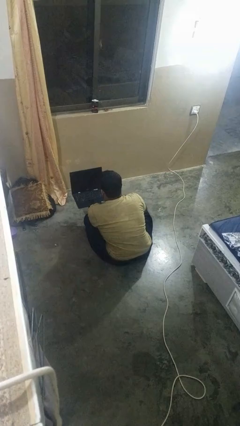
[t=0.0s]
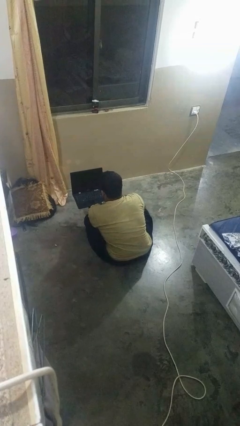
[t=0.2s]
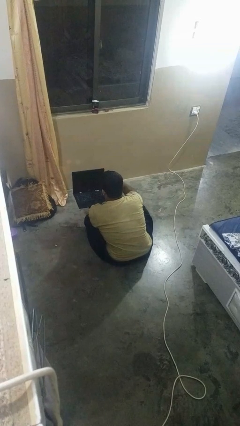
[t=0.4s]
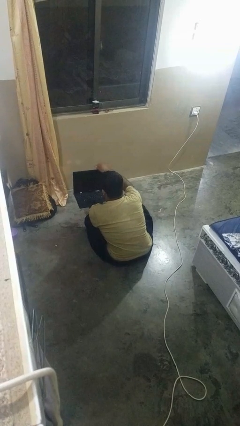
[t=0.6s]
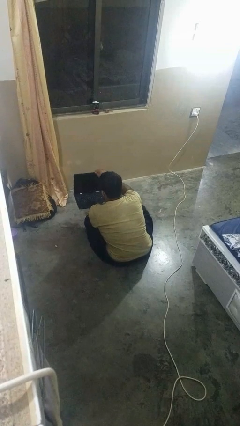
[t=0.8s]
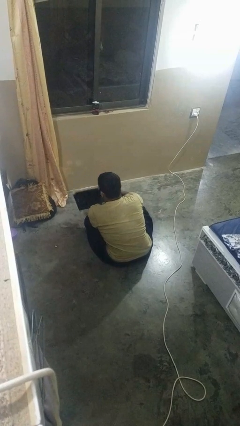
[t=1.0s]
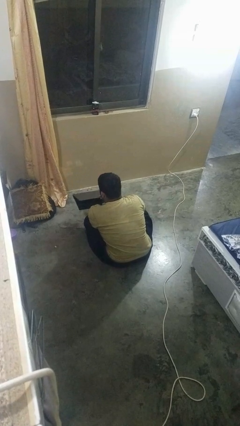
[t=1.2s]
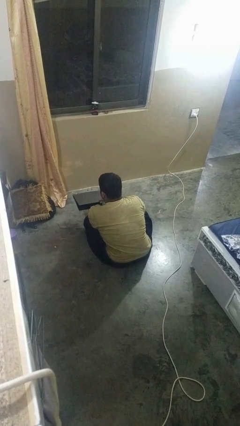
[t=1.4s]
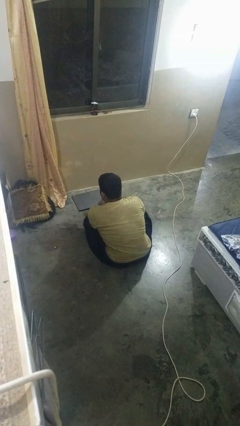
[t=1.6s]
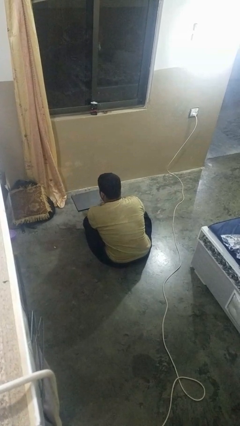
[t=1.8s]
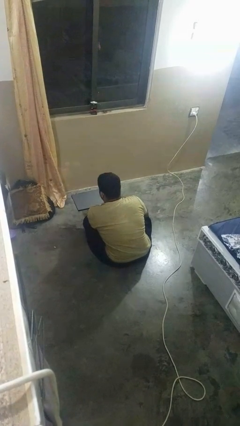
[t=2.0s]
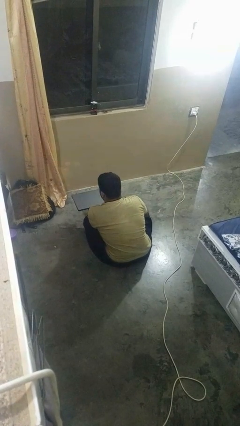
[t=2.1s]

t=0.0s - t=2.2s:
person closes laptop

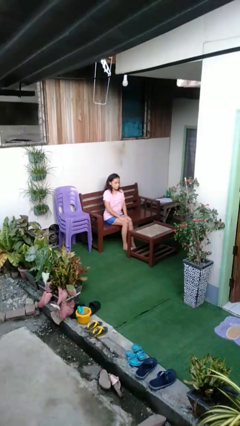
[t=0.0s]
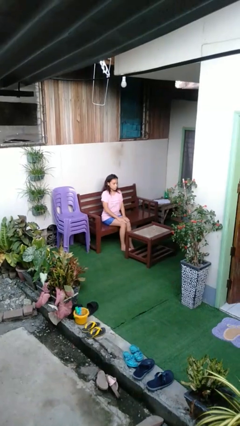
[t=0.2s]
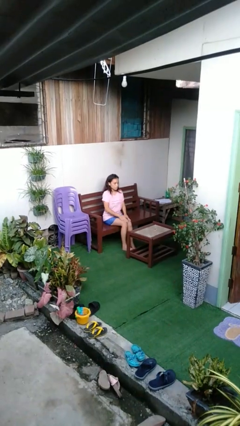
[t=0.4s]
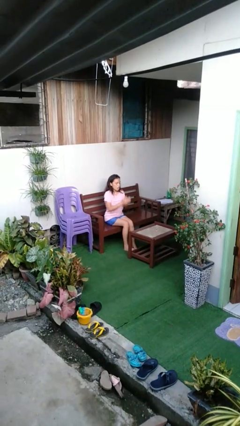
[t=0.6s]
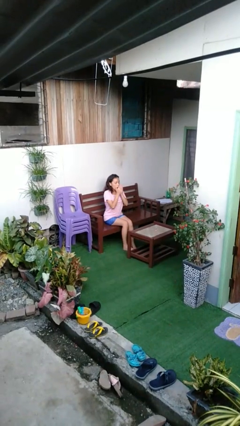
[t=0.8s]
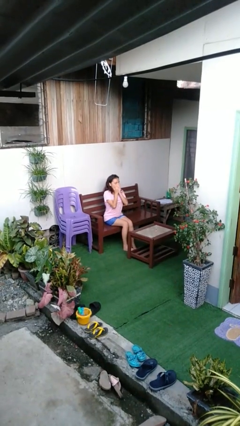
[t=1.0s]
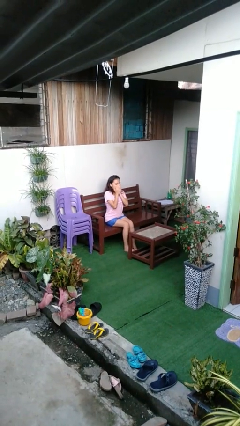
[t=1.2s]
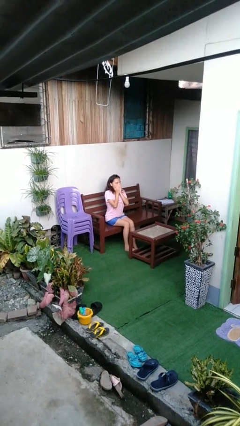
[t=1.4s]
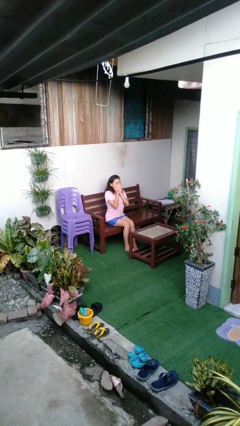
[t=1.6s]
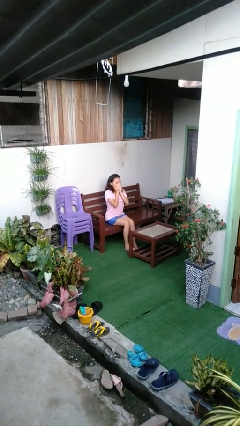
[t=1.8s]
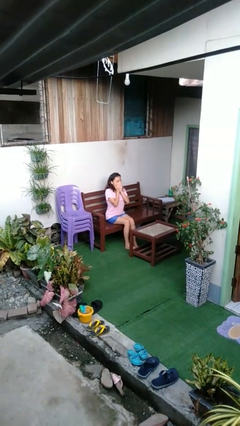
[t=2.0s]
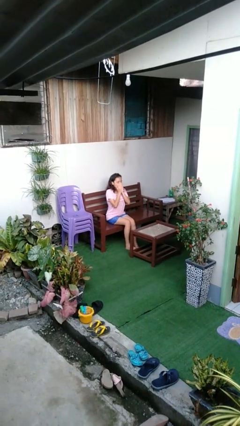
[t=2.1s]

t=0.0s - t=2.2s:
person yawns

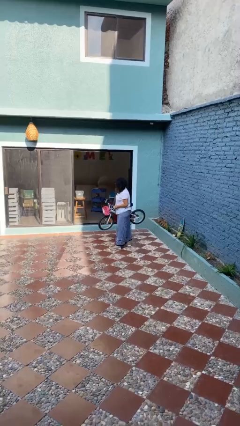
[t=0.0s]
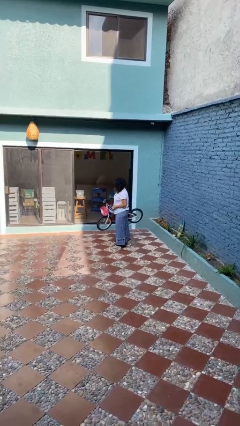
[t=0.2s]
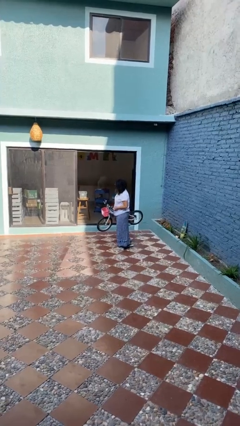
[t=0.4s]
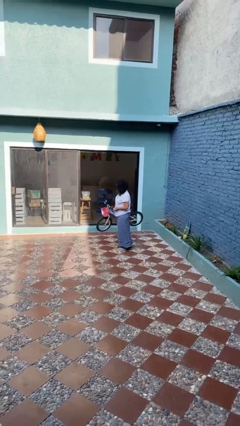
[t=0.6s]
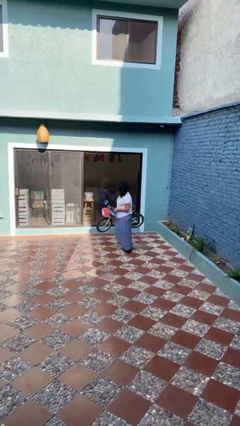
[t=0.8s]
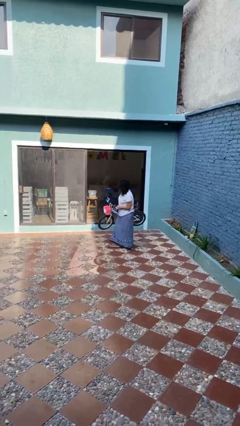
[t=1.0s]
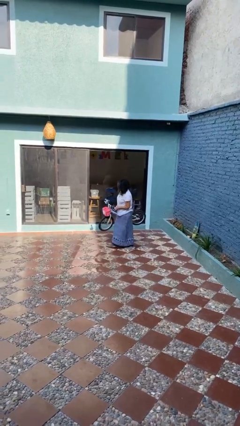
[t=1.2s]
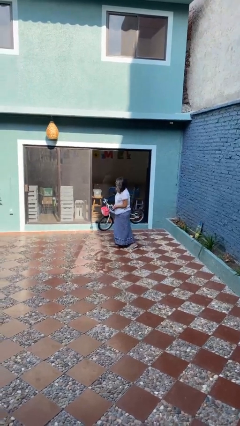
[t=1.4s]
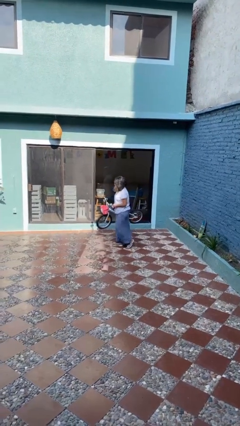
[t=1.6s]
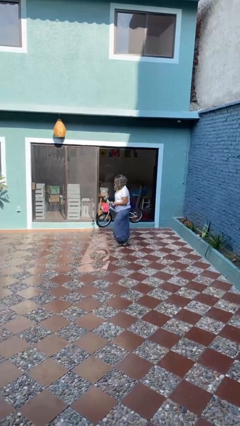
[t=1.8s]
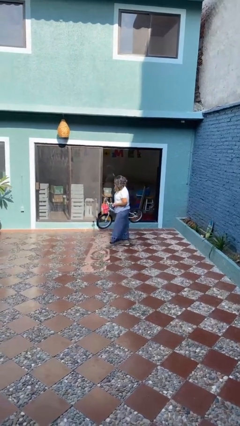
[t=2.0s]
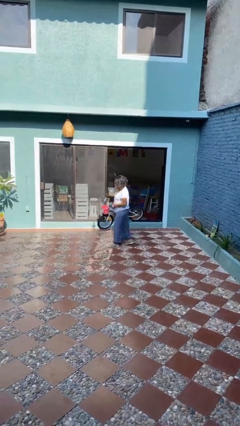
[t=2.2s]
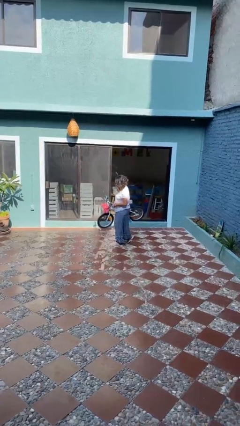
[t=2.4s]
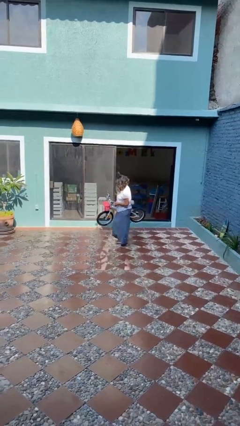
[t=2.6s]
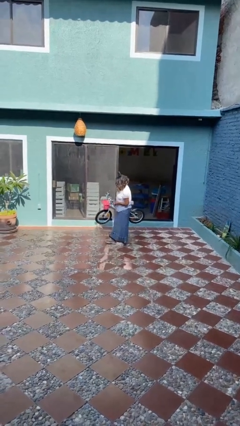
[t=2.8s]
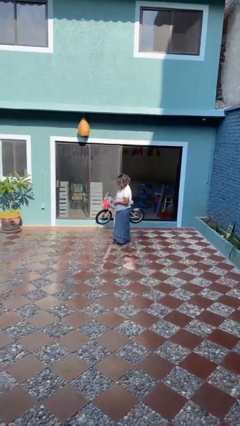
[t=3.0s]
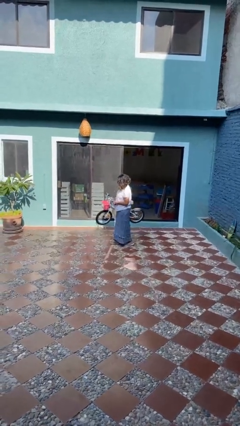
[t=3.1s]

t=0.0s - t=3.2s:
person carries bicycle

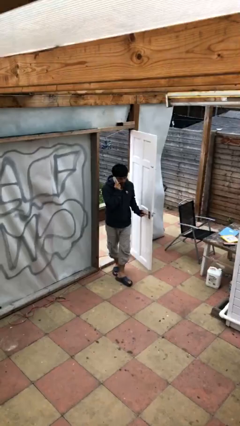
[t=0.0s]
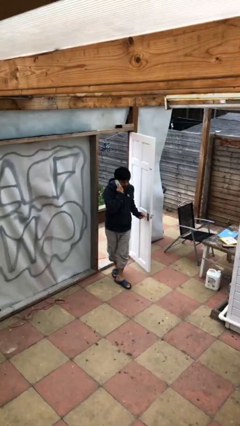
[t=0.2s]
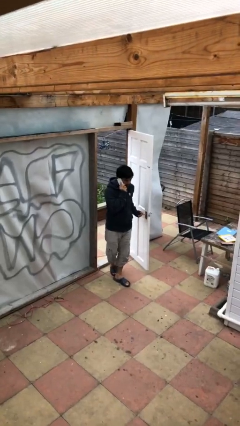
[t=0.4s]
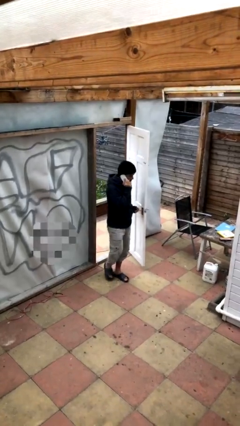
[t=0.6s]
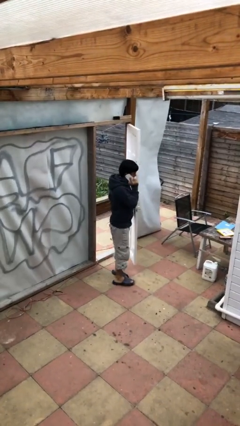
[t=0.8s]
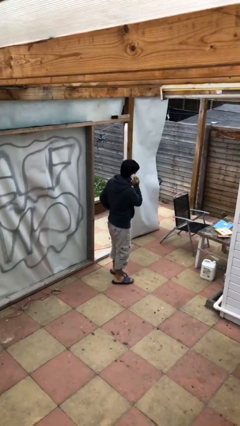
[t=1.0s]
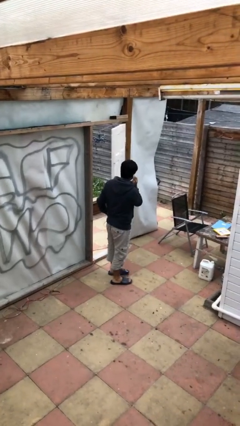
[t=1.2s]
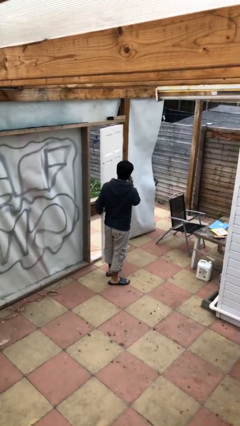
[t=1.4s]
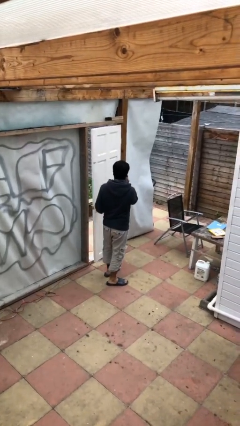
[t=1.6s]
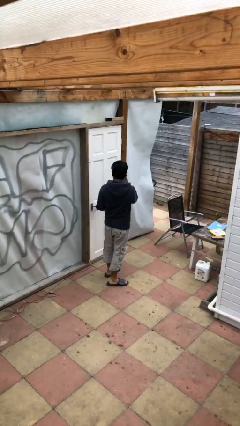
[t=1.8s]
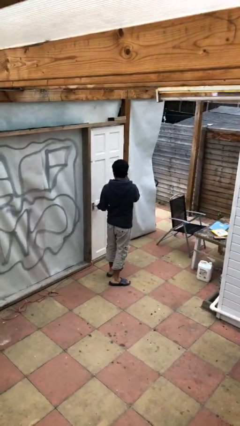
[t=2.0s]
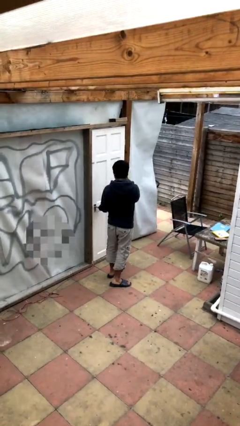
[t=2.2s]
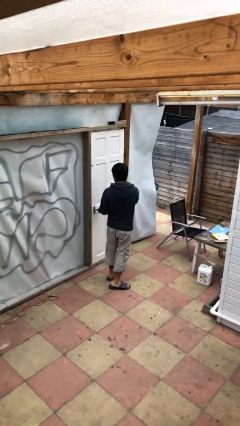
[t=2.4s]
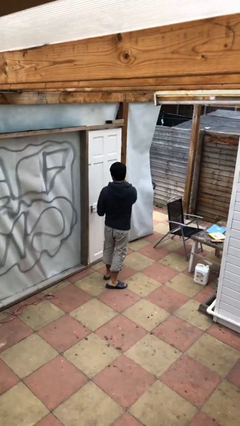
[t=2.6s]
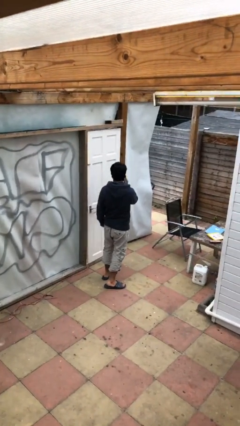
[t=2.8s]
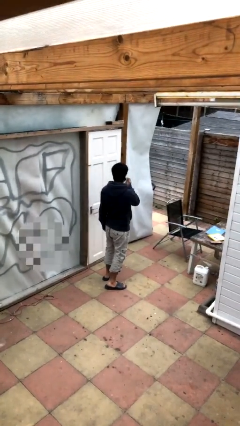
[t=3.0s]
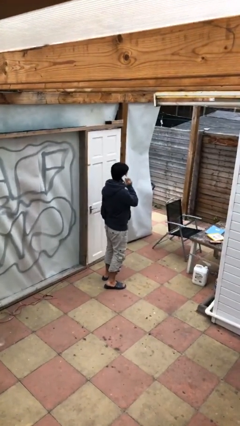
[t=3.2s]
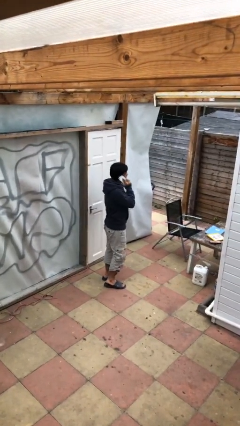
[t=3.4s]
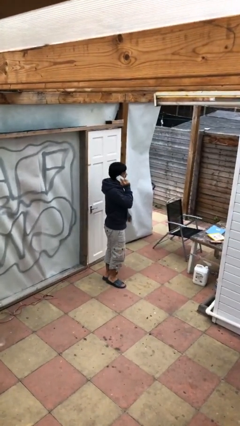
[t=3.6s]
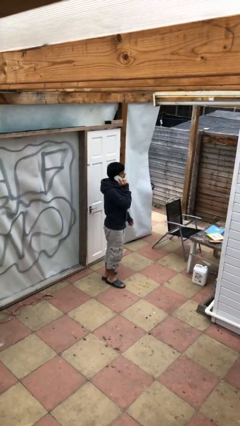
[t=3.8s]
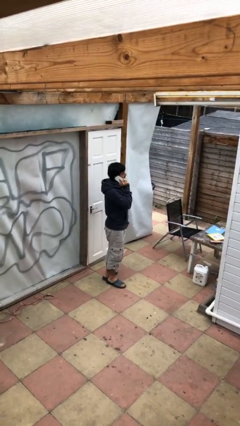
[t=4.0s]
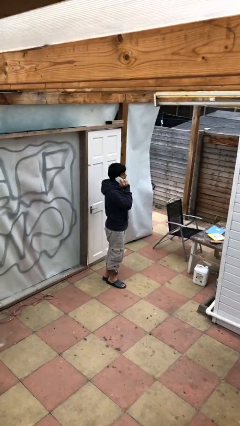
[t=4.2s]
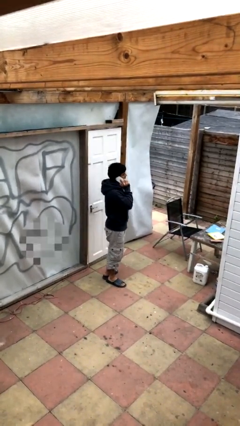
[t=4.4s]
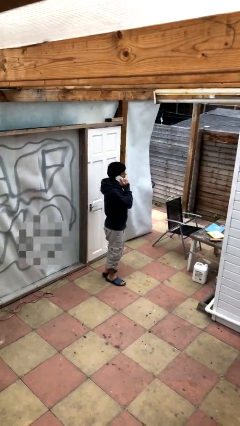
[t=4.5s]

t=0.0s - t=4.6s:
person closes facility door

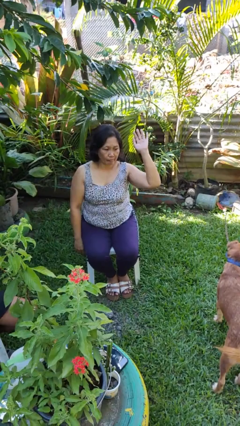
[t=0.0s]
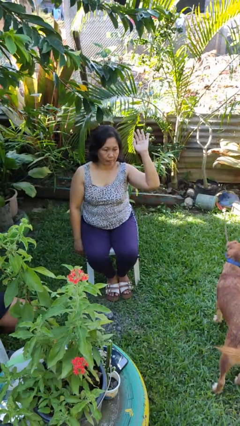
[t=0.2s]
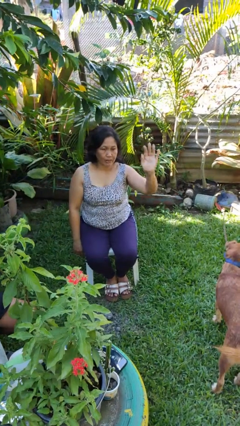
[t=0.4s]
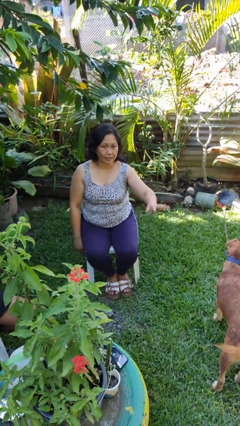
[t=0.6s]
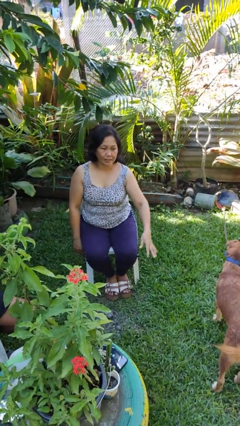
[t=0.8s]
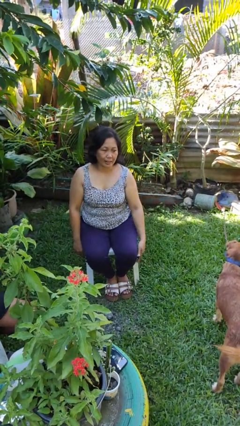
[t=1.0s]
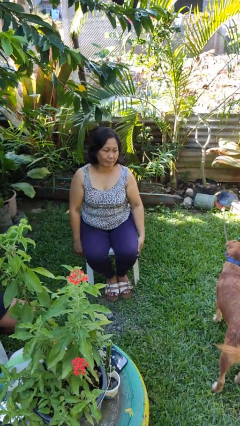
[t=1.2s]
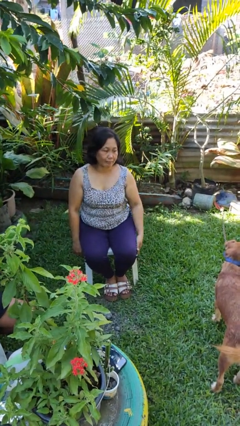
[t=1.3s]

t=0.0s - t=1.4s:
person gestures lower hand

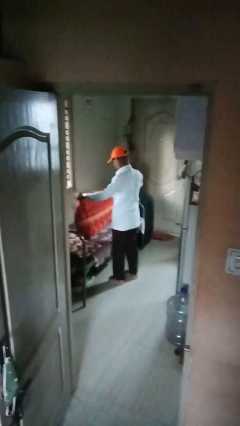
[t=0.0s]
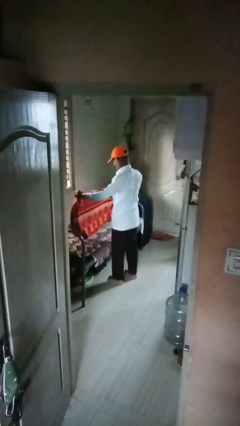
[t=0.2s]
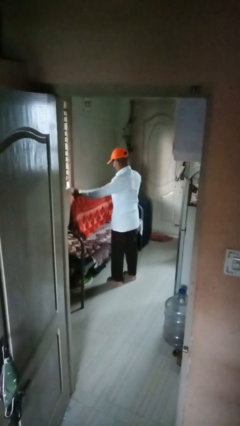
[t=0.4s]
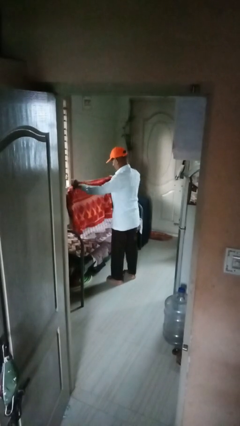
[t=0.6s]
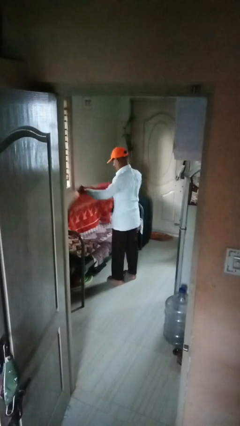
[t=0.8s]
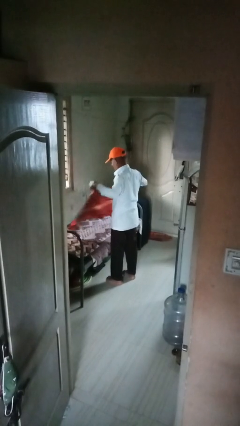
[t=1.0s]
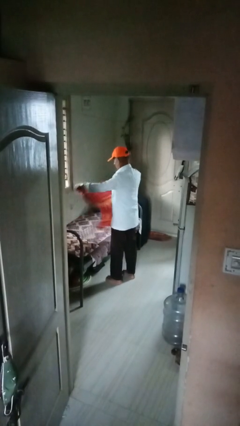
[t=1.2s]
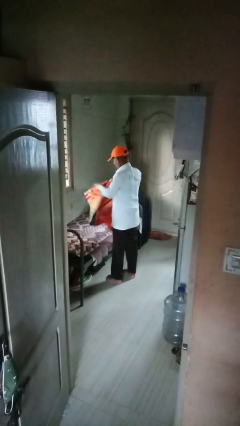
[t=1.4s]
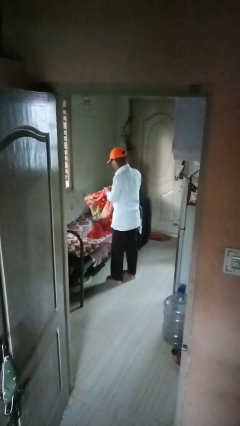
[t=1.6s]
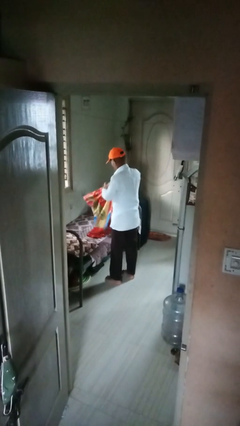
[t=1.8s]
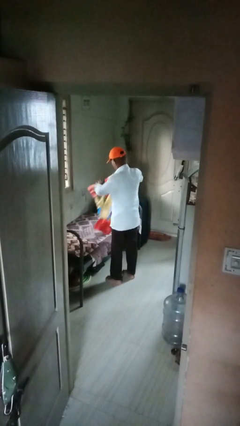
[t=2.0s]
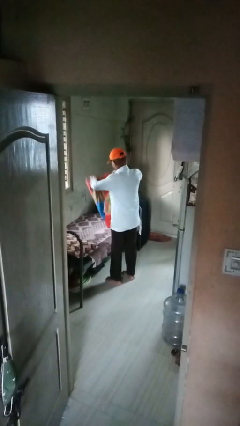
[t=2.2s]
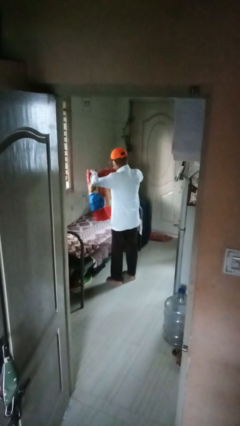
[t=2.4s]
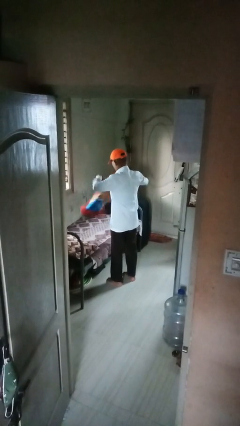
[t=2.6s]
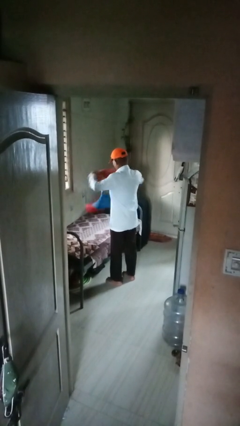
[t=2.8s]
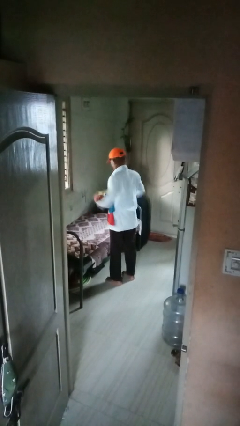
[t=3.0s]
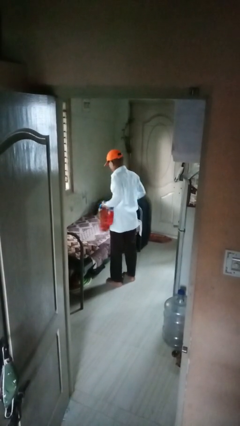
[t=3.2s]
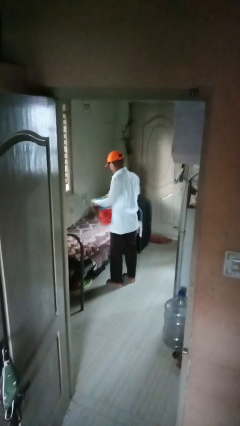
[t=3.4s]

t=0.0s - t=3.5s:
person folds blanket

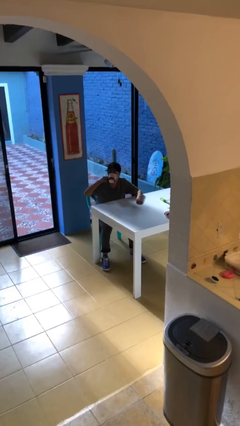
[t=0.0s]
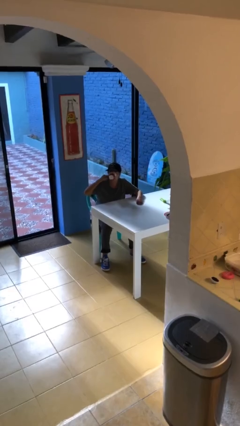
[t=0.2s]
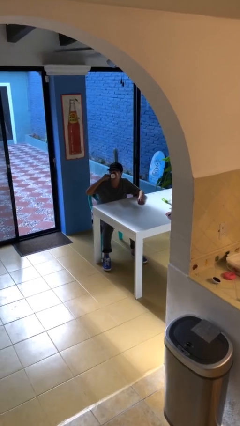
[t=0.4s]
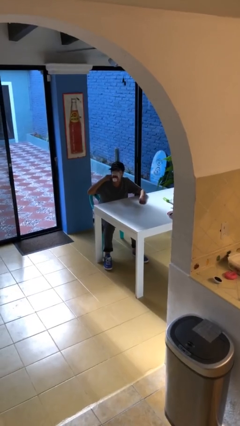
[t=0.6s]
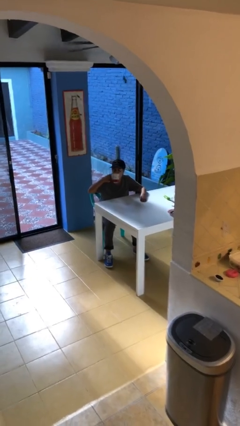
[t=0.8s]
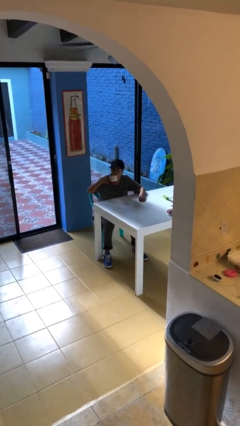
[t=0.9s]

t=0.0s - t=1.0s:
person drinks from mug
